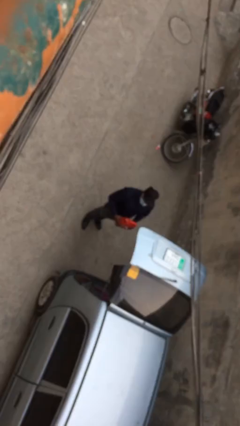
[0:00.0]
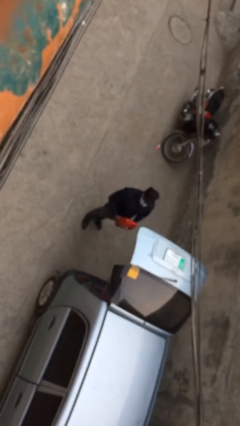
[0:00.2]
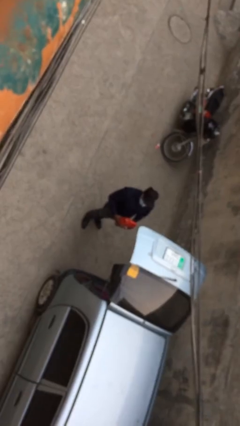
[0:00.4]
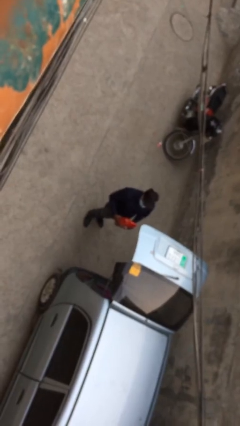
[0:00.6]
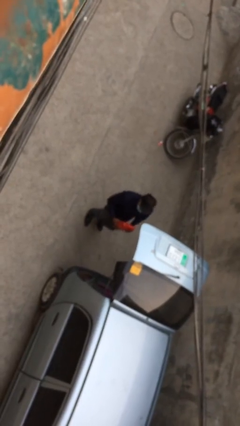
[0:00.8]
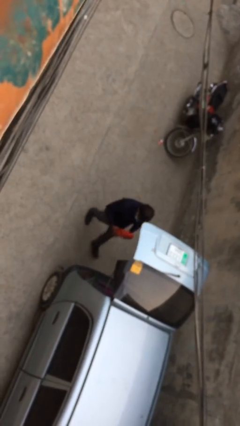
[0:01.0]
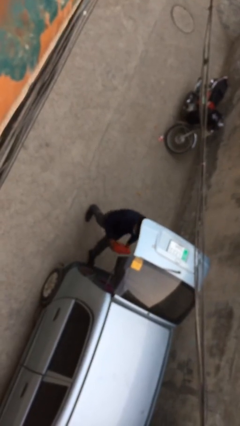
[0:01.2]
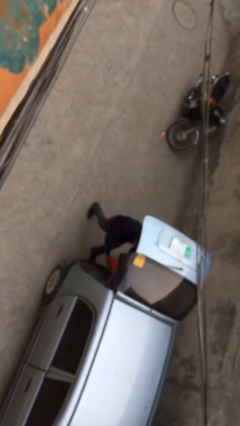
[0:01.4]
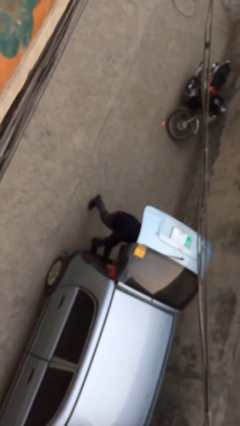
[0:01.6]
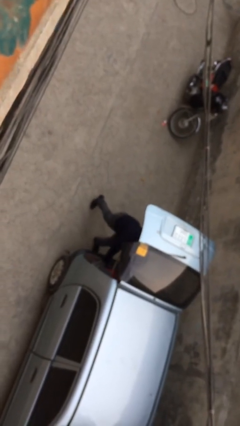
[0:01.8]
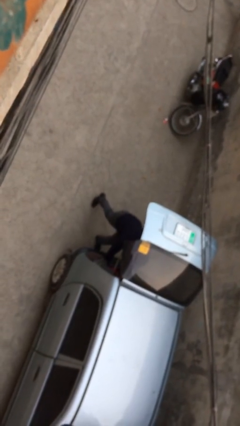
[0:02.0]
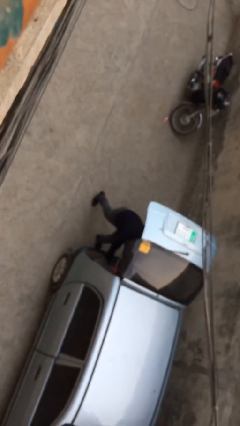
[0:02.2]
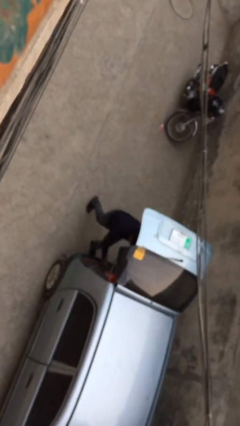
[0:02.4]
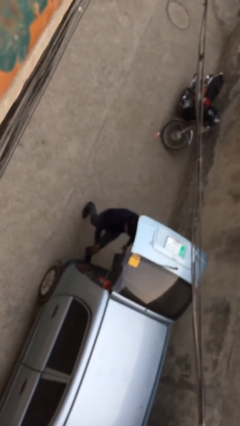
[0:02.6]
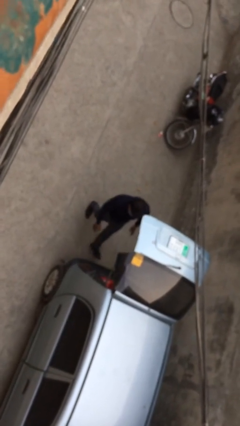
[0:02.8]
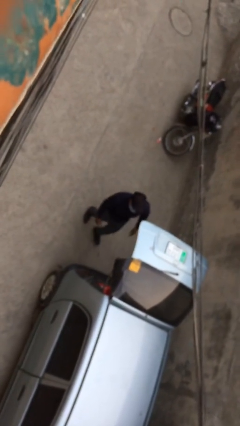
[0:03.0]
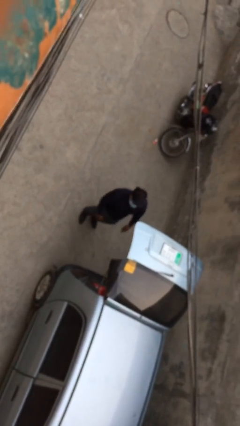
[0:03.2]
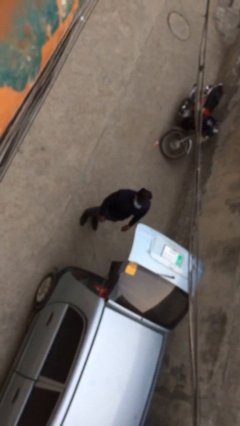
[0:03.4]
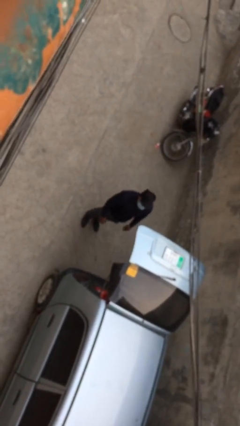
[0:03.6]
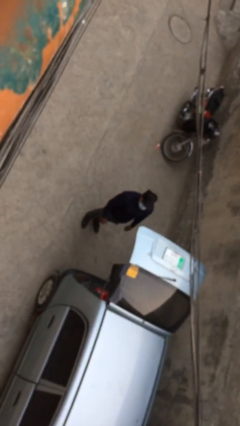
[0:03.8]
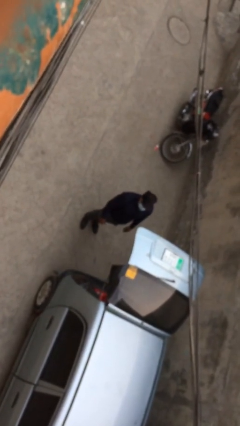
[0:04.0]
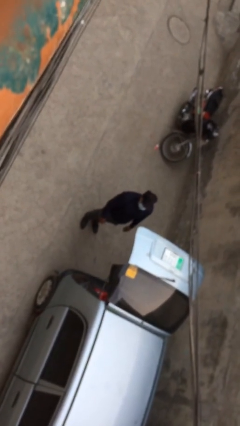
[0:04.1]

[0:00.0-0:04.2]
person loads car

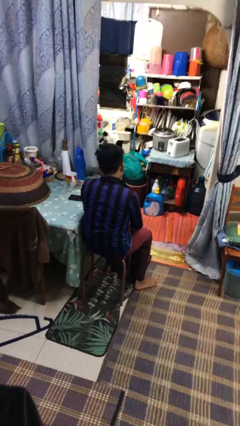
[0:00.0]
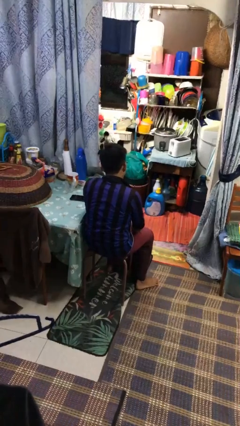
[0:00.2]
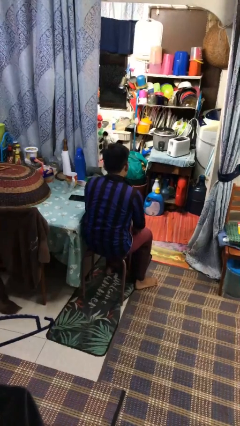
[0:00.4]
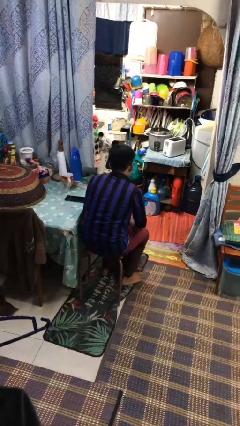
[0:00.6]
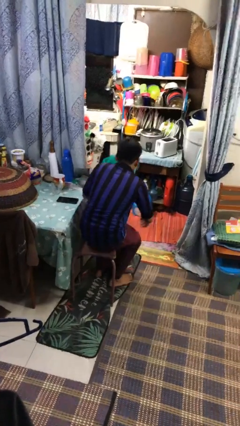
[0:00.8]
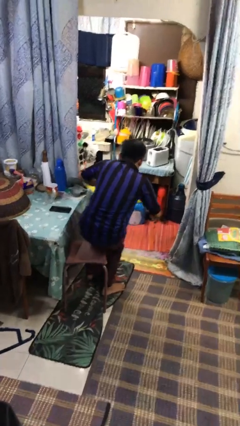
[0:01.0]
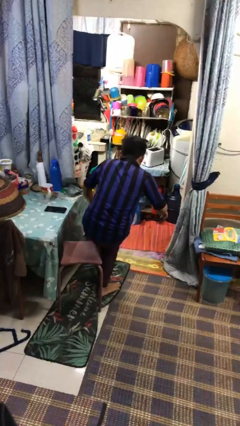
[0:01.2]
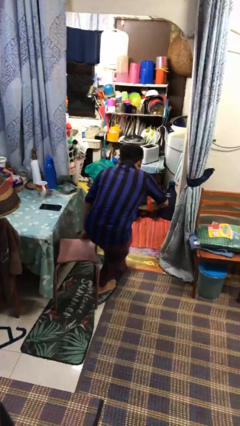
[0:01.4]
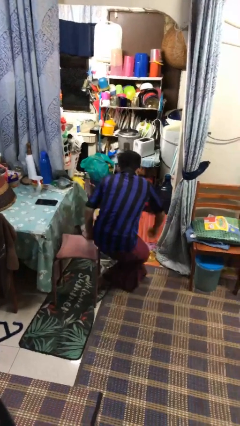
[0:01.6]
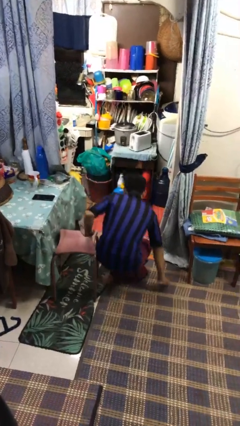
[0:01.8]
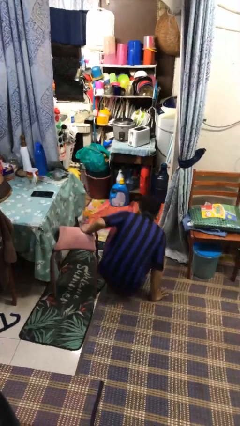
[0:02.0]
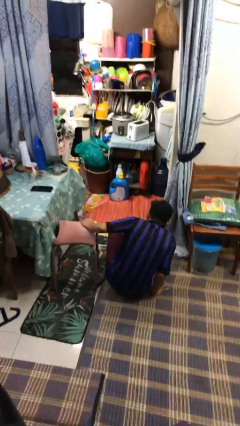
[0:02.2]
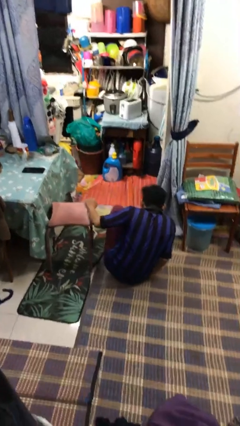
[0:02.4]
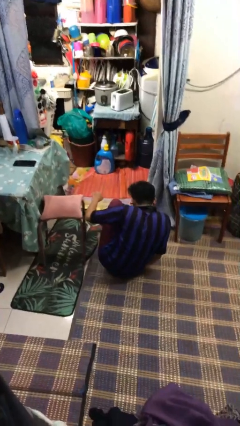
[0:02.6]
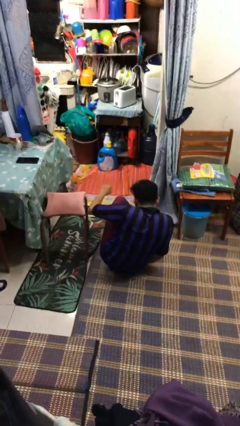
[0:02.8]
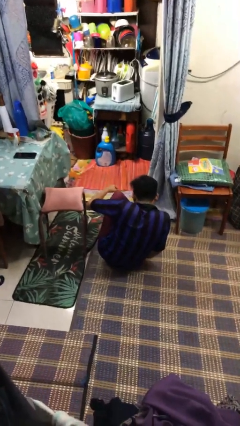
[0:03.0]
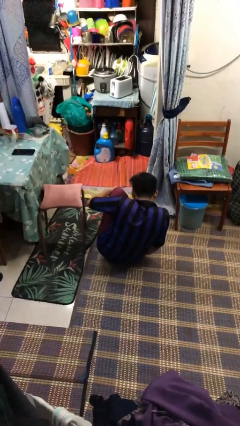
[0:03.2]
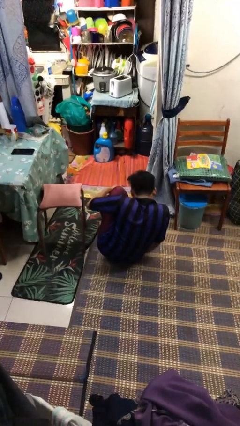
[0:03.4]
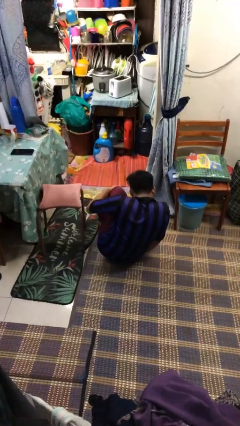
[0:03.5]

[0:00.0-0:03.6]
person falls from chair

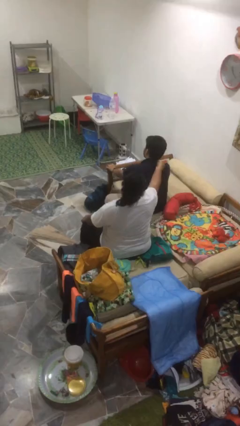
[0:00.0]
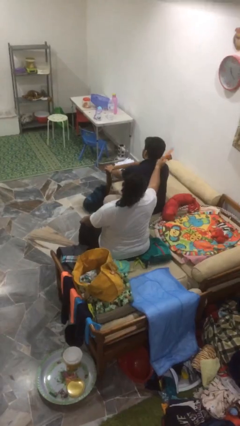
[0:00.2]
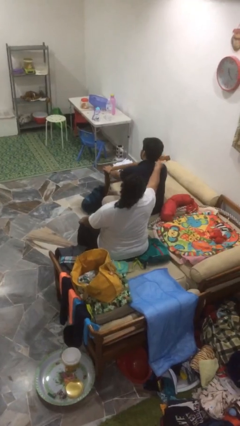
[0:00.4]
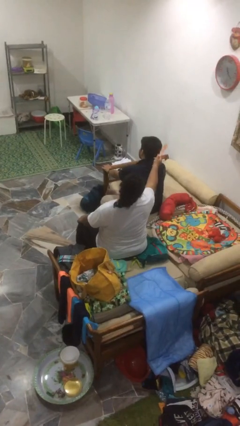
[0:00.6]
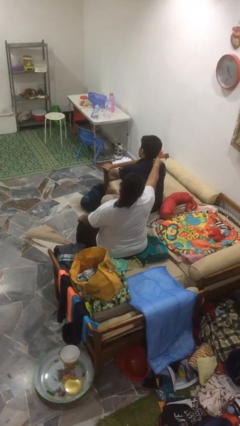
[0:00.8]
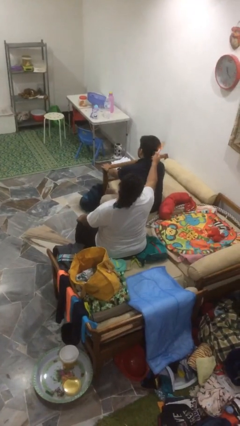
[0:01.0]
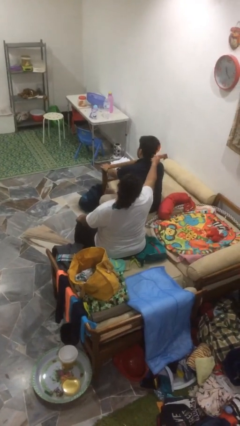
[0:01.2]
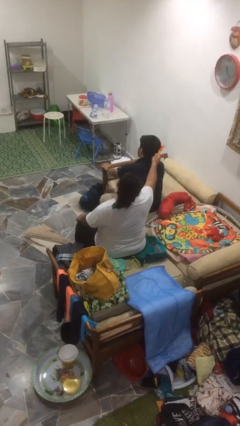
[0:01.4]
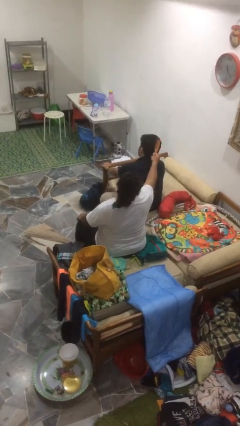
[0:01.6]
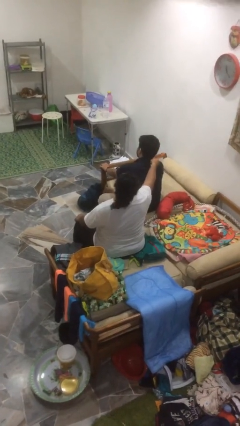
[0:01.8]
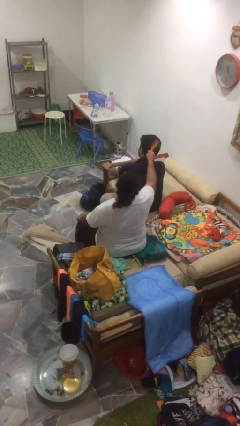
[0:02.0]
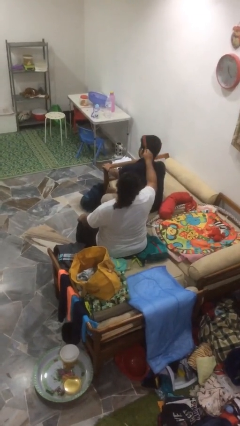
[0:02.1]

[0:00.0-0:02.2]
person brushes hair of person

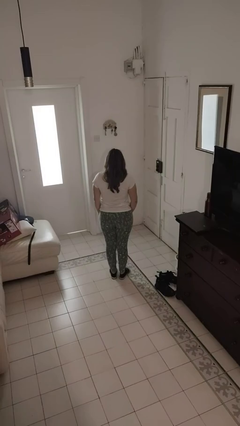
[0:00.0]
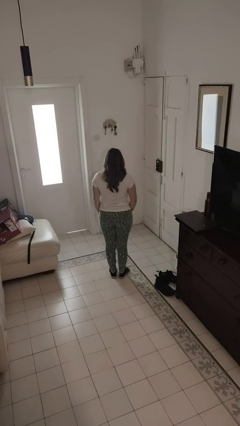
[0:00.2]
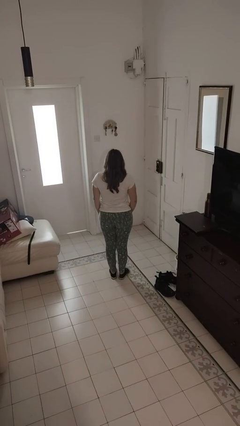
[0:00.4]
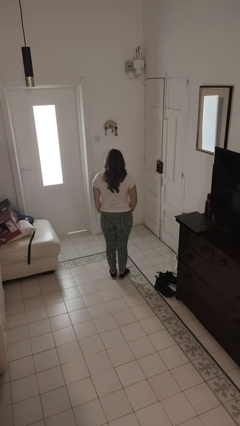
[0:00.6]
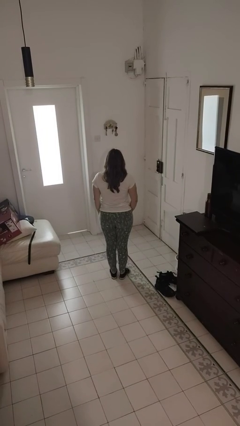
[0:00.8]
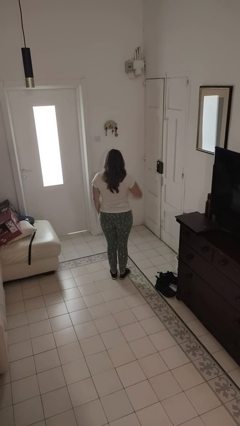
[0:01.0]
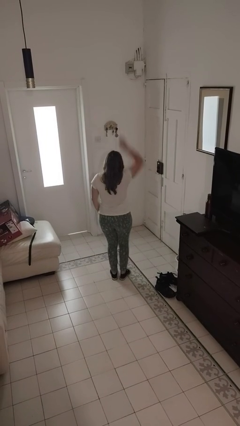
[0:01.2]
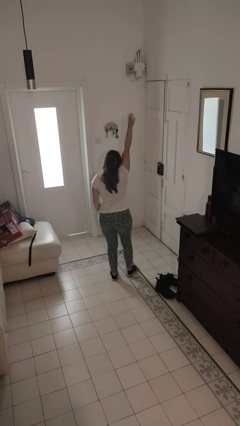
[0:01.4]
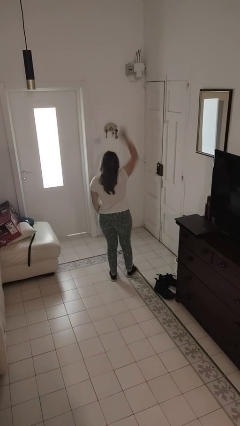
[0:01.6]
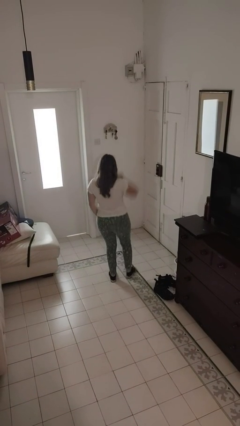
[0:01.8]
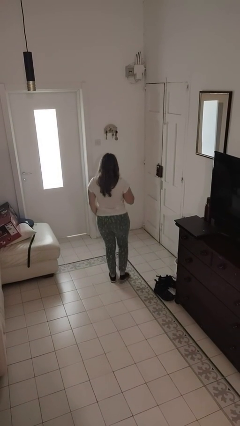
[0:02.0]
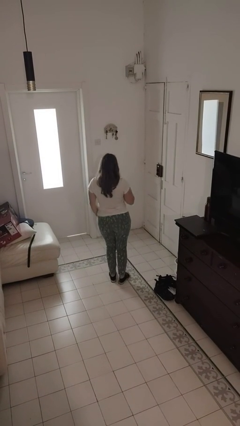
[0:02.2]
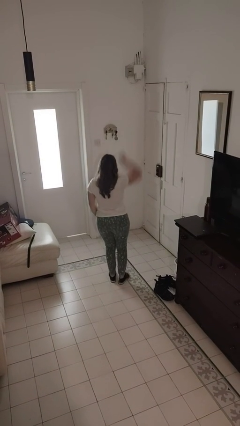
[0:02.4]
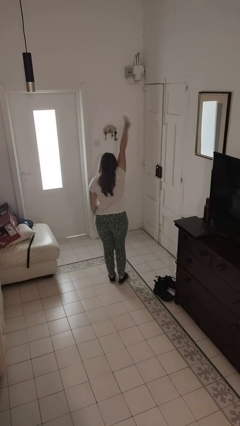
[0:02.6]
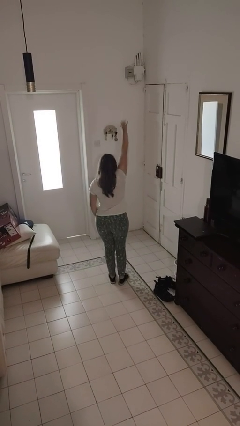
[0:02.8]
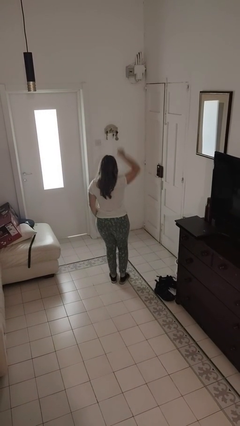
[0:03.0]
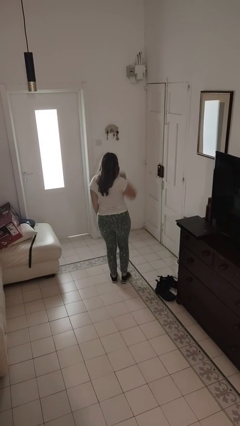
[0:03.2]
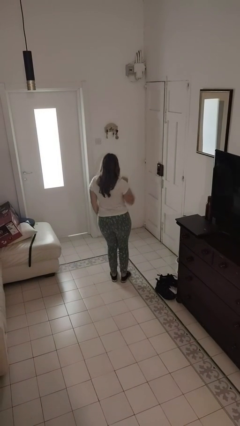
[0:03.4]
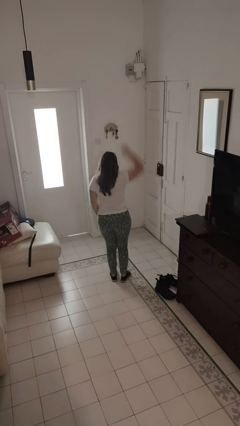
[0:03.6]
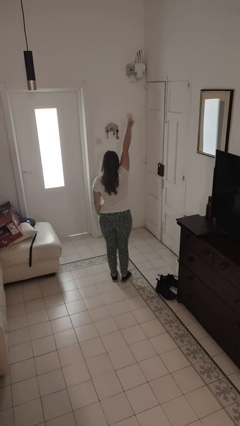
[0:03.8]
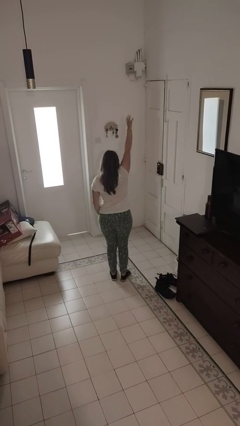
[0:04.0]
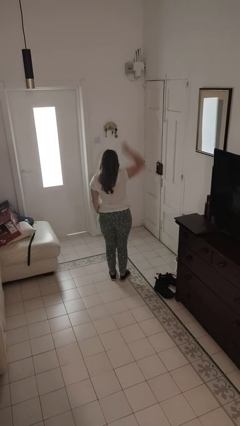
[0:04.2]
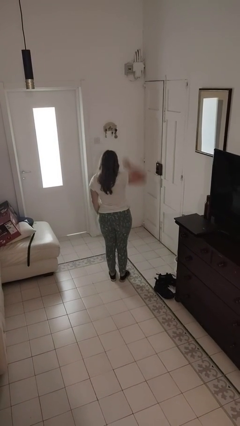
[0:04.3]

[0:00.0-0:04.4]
person dances in place

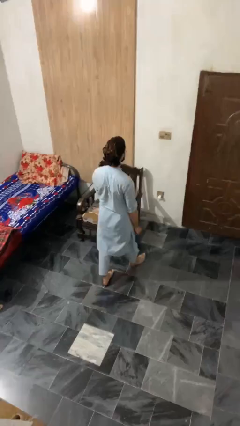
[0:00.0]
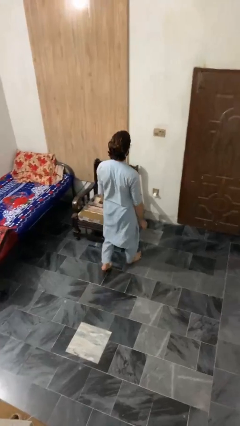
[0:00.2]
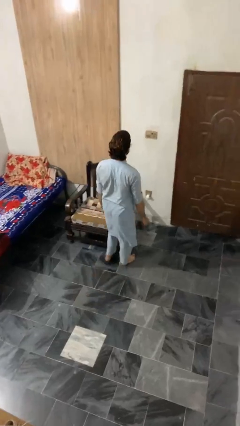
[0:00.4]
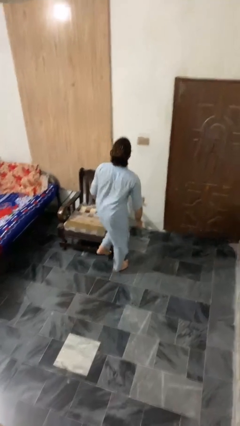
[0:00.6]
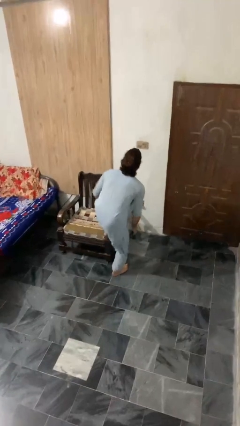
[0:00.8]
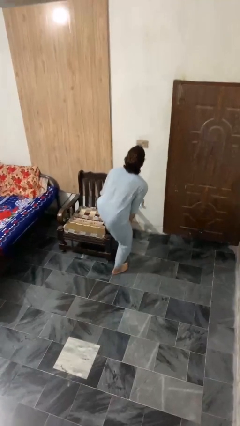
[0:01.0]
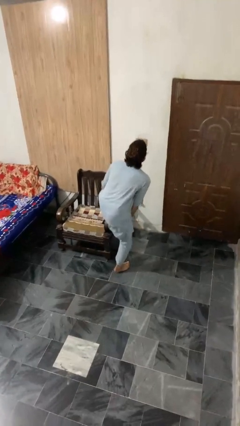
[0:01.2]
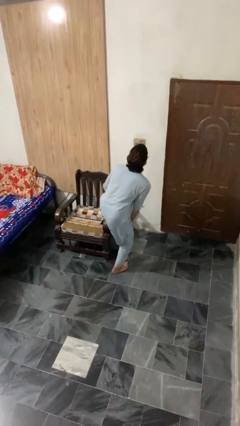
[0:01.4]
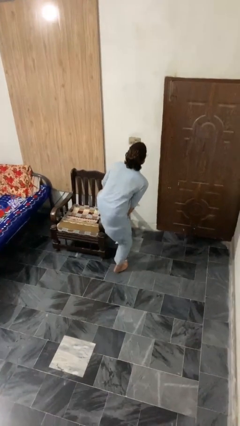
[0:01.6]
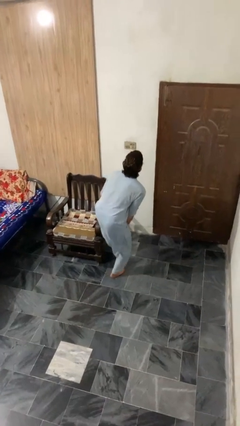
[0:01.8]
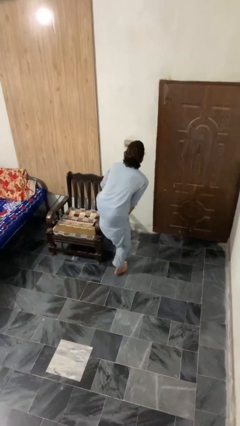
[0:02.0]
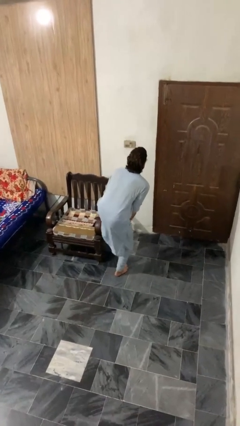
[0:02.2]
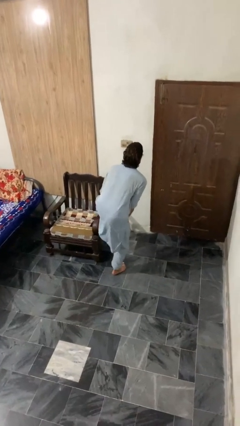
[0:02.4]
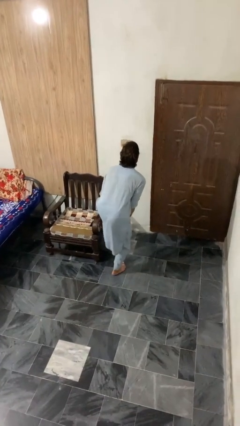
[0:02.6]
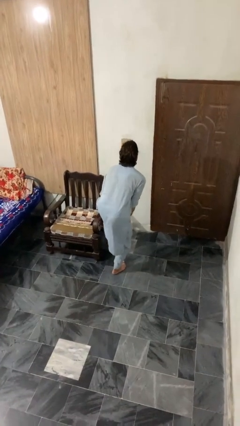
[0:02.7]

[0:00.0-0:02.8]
person stubs toe
